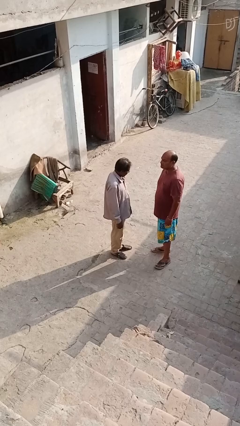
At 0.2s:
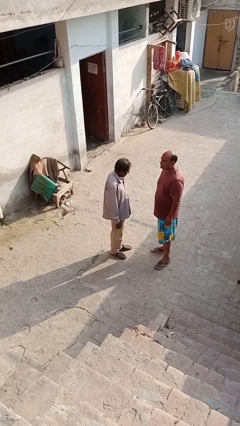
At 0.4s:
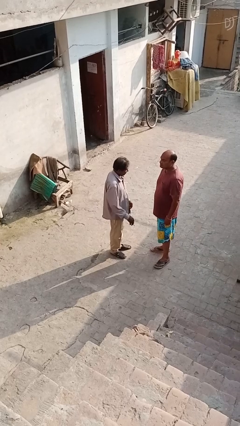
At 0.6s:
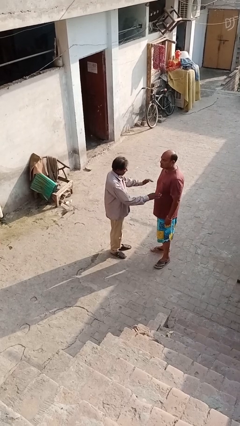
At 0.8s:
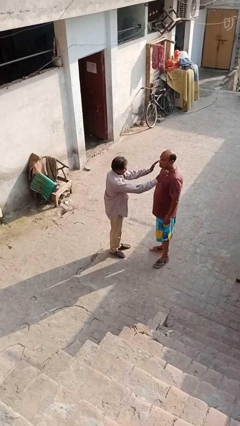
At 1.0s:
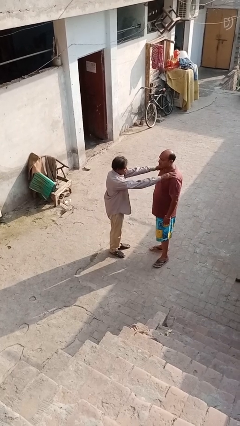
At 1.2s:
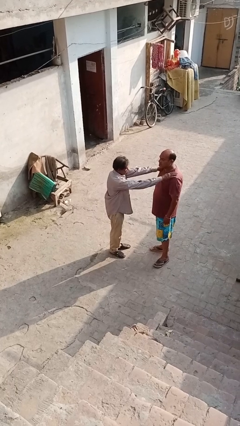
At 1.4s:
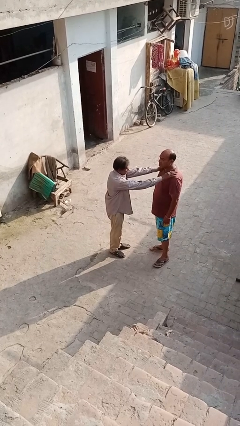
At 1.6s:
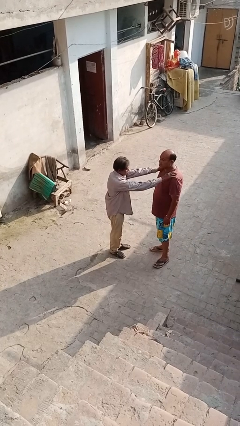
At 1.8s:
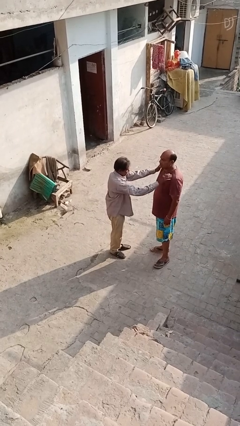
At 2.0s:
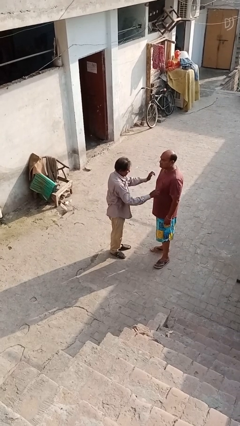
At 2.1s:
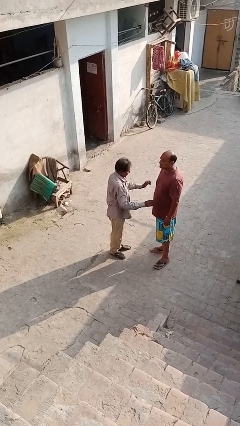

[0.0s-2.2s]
person pounds shoulders of person

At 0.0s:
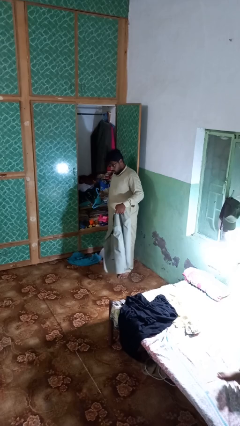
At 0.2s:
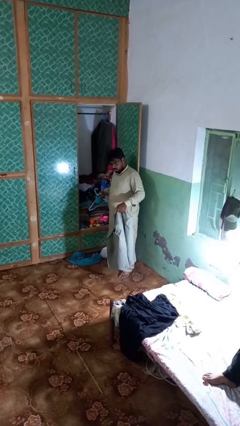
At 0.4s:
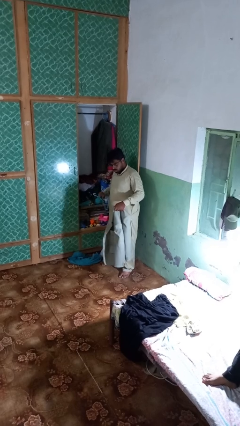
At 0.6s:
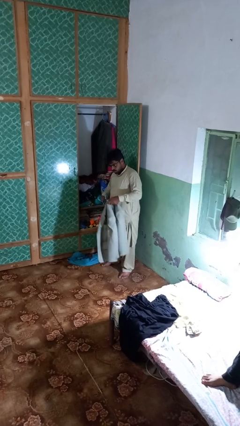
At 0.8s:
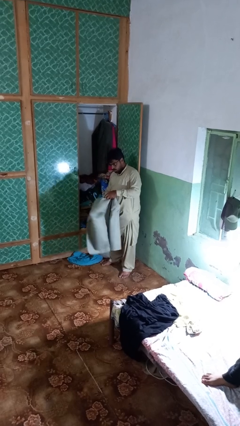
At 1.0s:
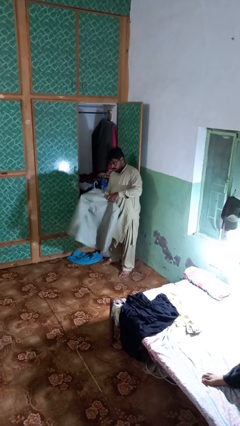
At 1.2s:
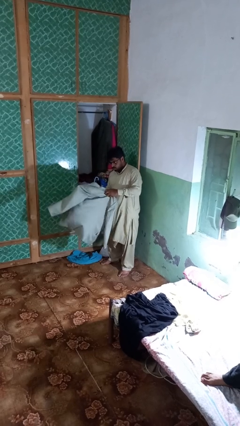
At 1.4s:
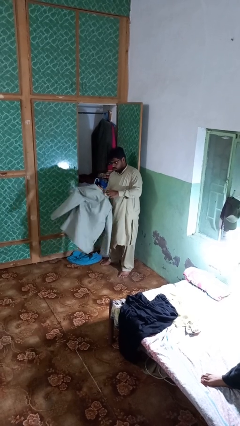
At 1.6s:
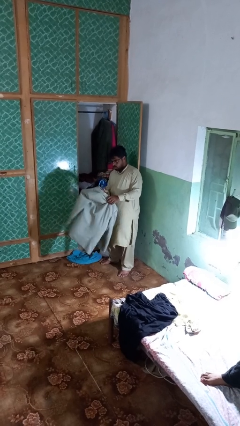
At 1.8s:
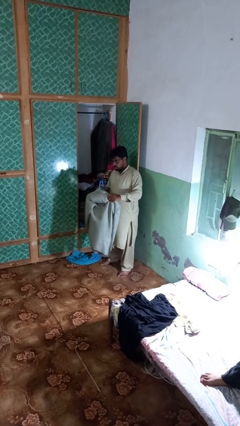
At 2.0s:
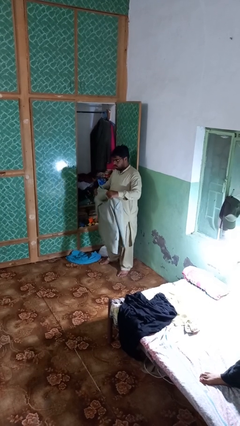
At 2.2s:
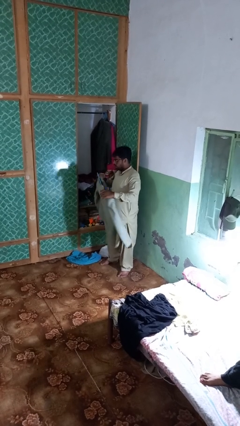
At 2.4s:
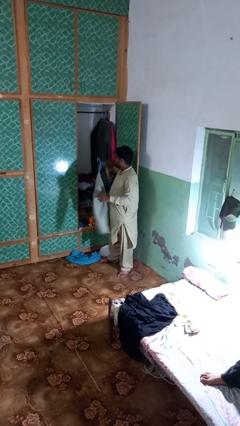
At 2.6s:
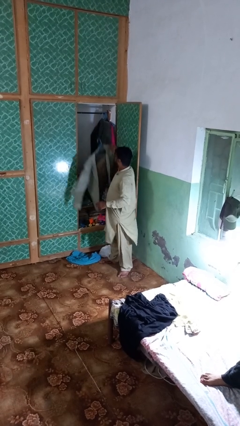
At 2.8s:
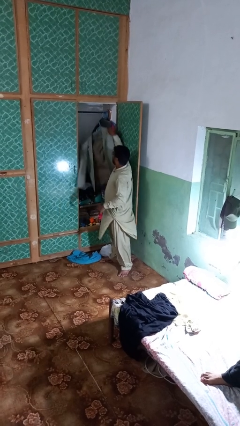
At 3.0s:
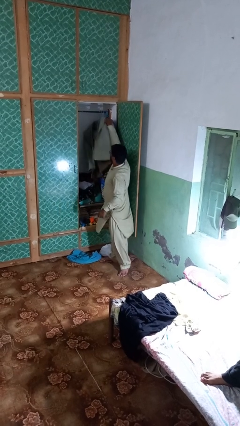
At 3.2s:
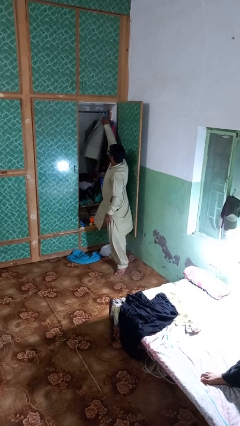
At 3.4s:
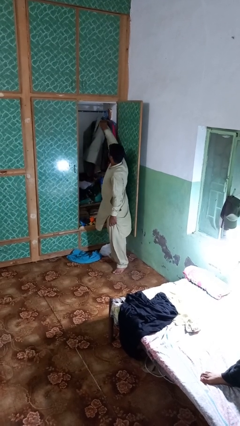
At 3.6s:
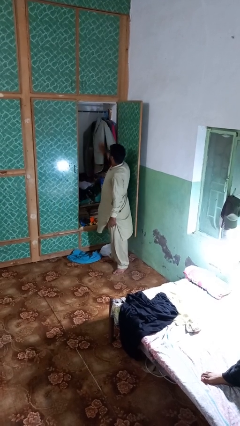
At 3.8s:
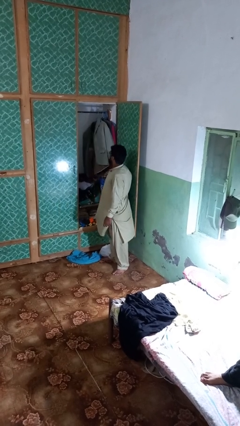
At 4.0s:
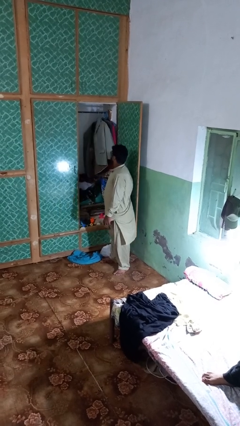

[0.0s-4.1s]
person puts clothes into closet

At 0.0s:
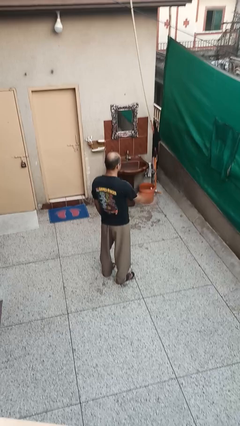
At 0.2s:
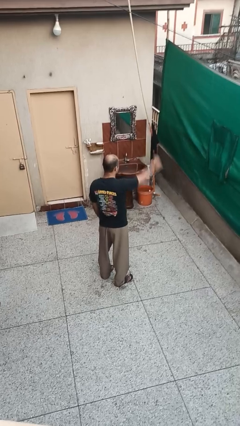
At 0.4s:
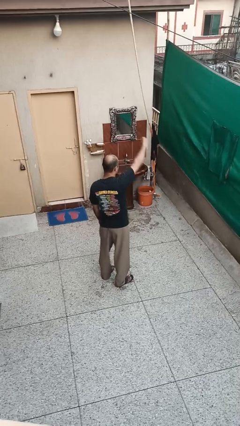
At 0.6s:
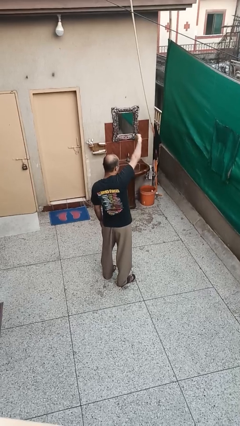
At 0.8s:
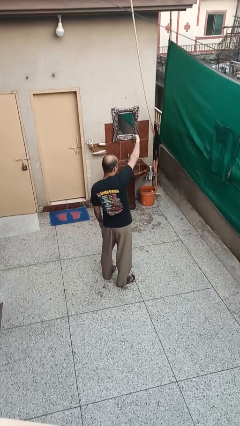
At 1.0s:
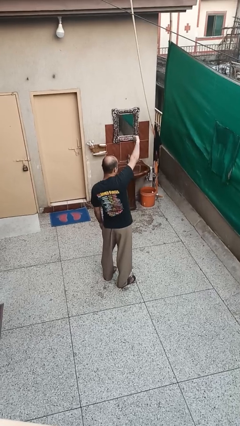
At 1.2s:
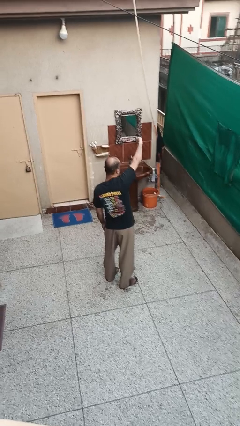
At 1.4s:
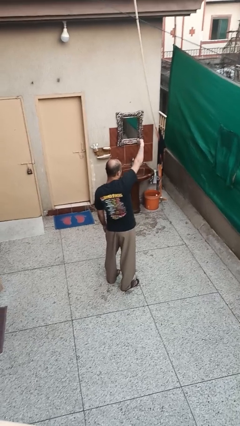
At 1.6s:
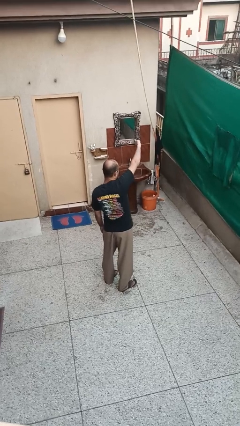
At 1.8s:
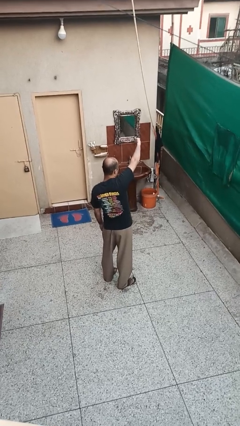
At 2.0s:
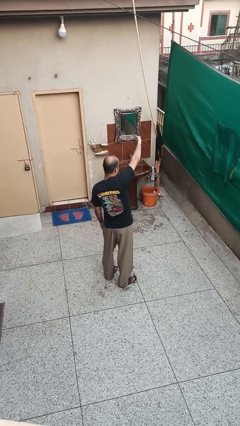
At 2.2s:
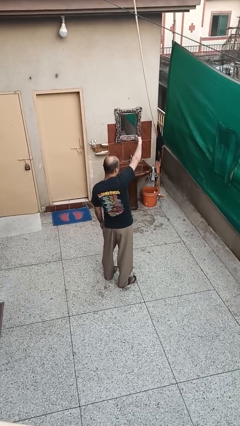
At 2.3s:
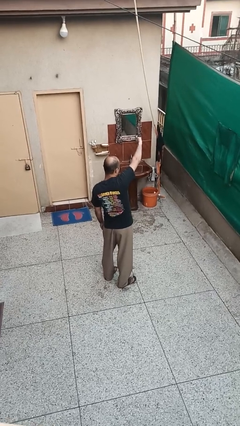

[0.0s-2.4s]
person gestures thumbs down

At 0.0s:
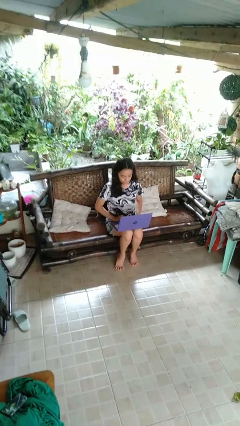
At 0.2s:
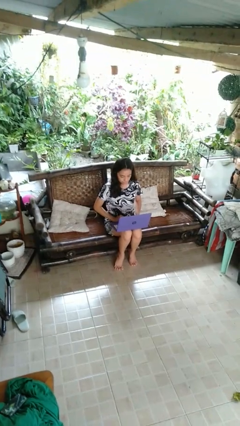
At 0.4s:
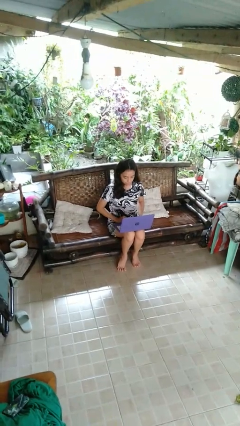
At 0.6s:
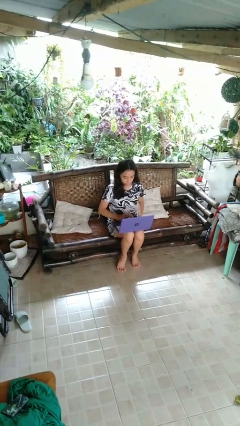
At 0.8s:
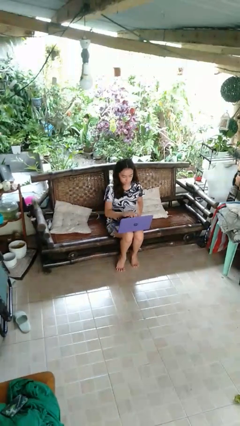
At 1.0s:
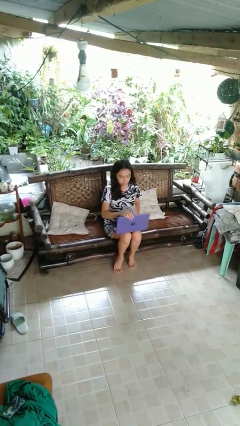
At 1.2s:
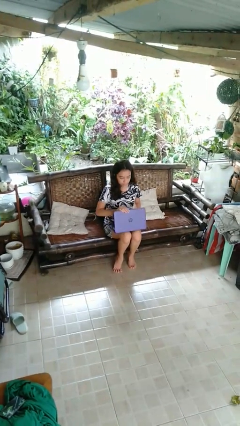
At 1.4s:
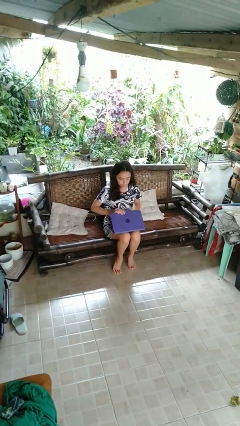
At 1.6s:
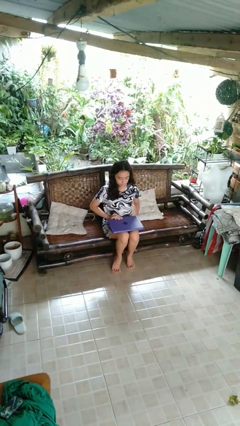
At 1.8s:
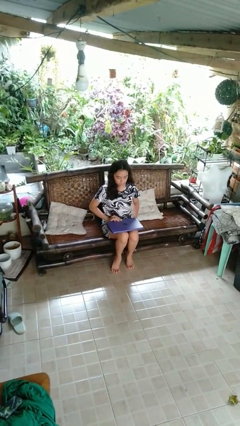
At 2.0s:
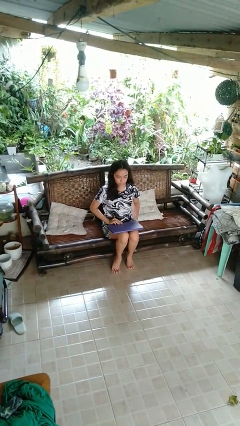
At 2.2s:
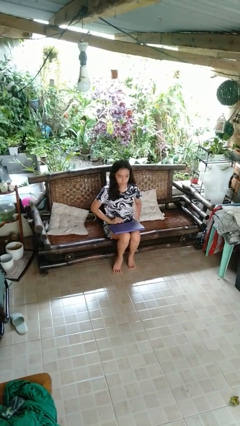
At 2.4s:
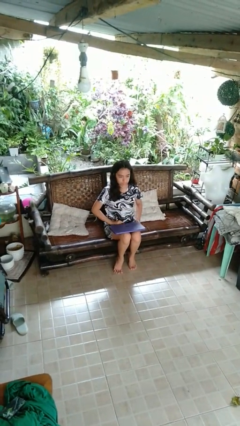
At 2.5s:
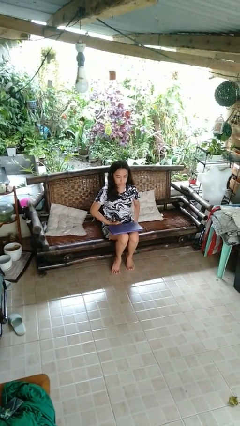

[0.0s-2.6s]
person closes laptop

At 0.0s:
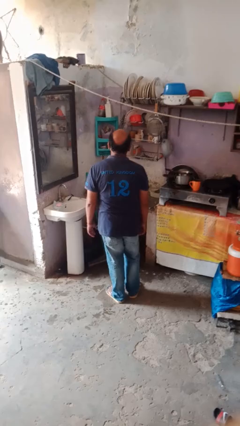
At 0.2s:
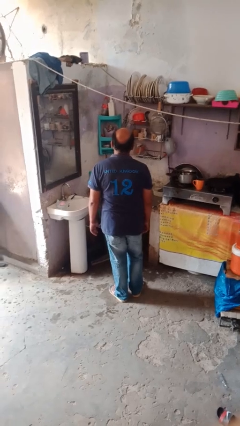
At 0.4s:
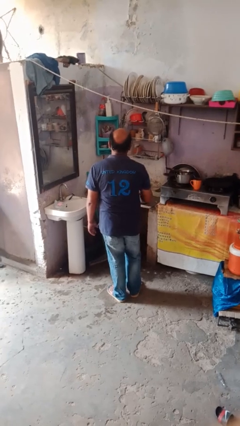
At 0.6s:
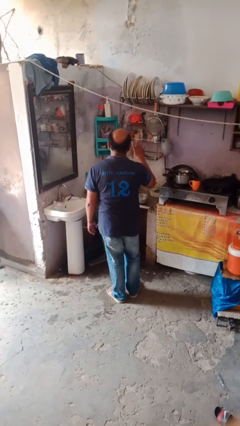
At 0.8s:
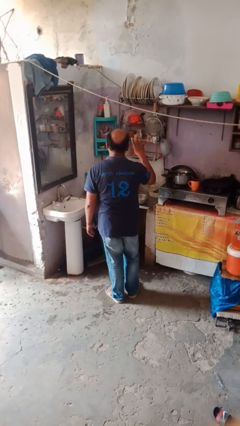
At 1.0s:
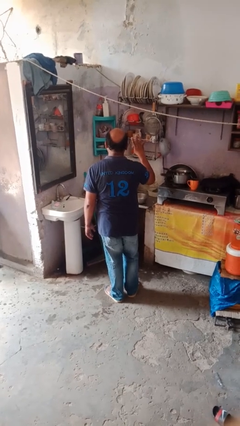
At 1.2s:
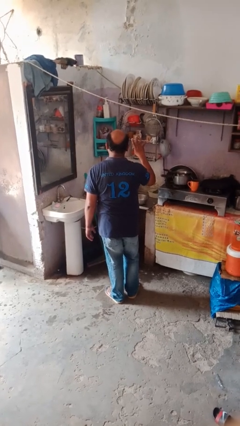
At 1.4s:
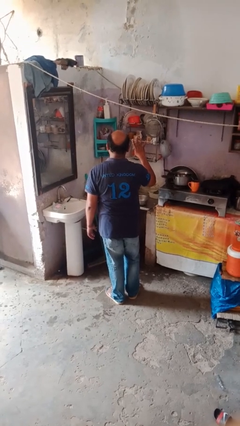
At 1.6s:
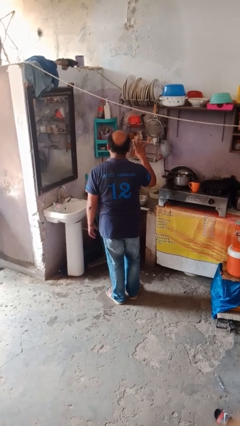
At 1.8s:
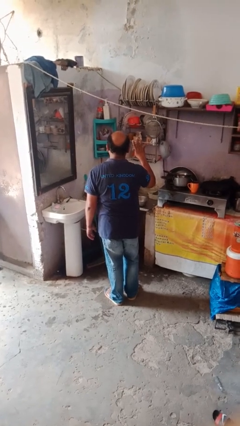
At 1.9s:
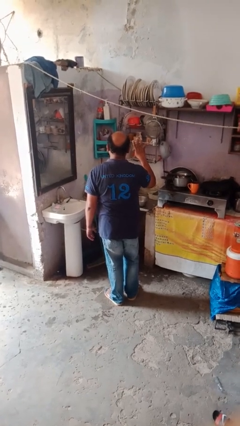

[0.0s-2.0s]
person gestures number four

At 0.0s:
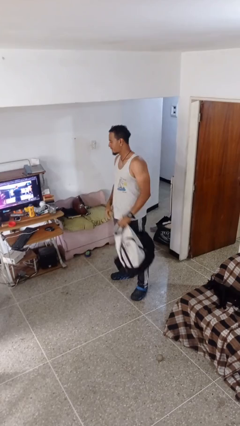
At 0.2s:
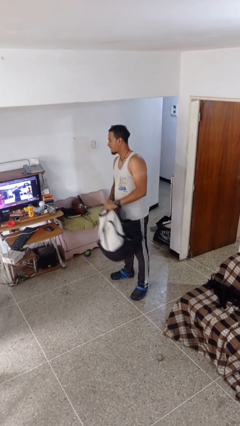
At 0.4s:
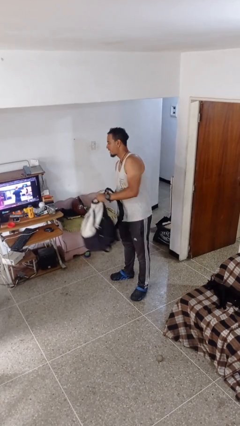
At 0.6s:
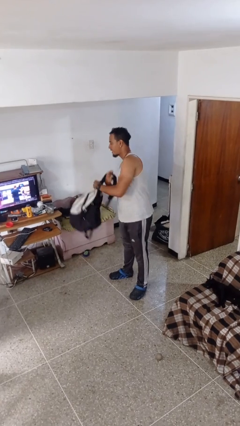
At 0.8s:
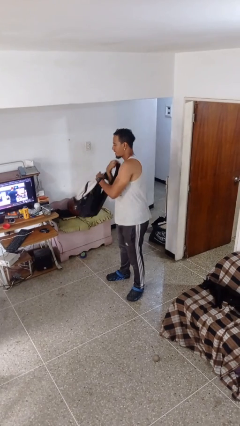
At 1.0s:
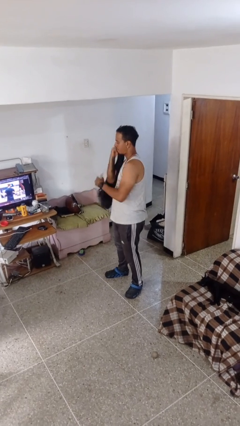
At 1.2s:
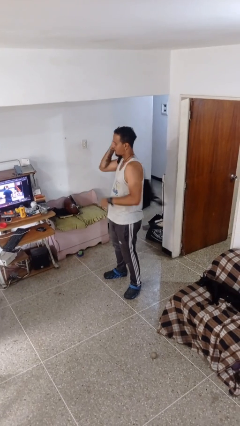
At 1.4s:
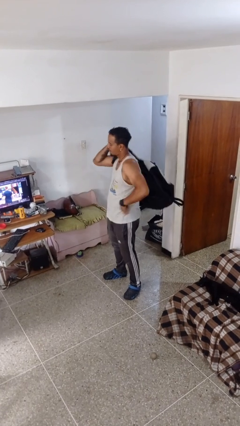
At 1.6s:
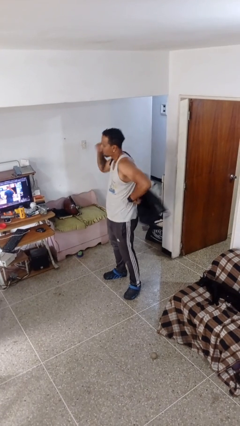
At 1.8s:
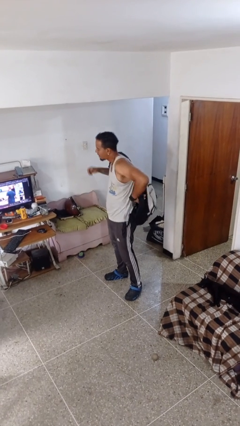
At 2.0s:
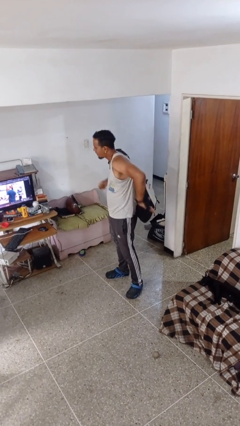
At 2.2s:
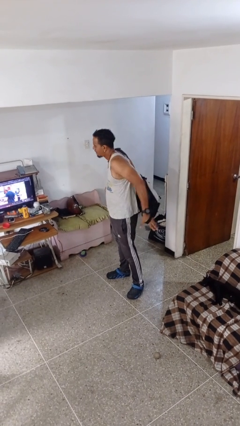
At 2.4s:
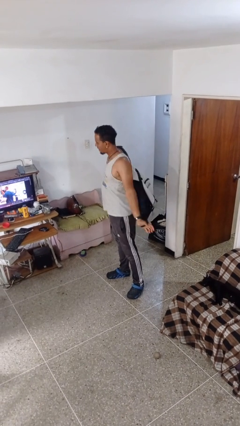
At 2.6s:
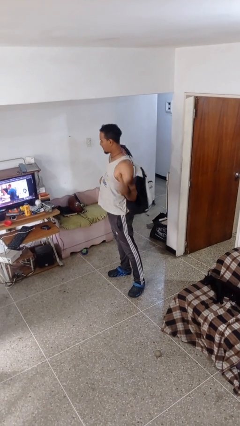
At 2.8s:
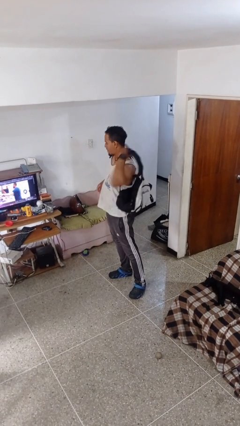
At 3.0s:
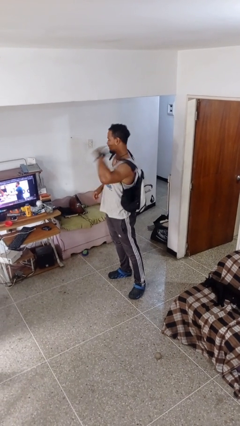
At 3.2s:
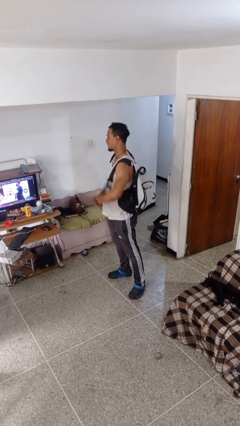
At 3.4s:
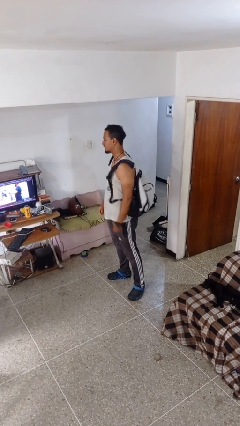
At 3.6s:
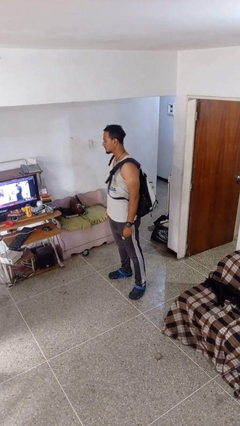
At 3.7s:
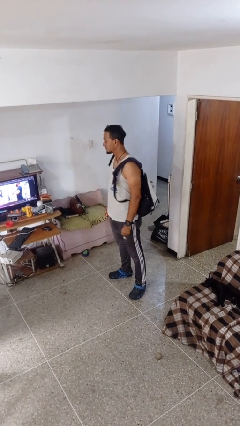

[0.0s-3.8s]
person puts on backpack

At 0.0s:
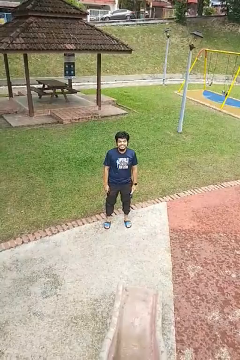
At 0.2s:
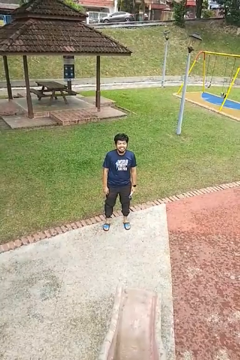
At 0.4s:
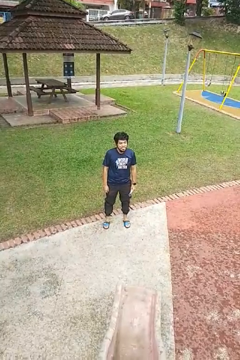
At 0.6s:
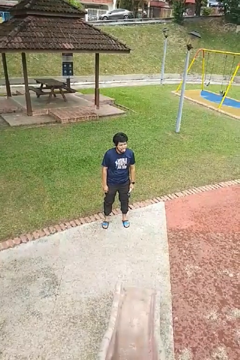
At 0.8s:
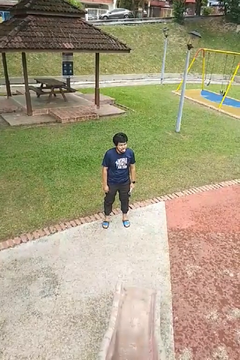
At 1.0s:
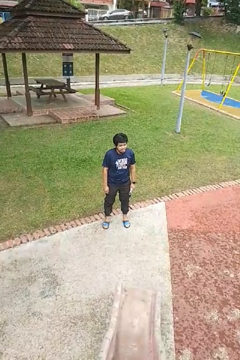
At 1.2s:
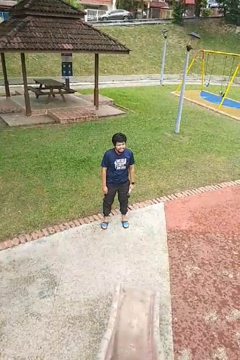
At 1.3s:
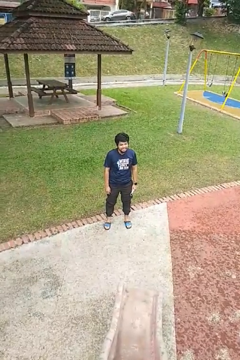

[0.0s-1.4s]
person sticks out tongue
